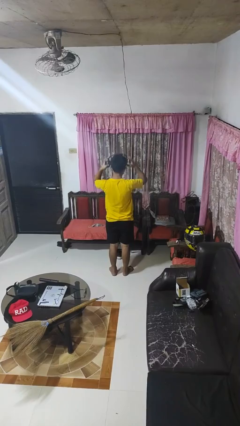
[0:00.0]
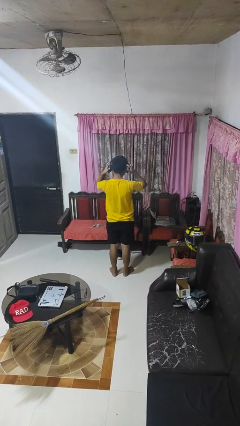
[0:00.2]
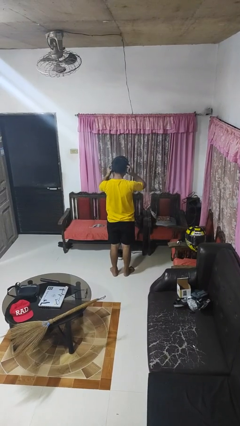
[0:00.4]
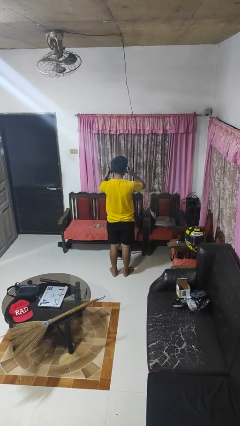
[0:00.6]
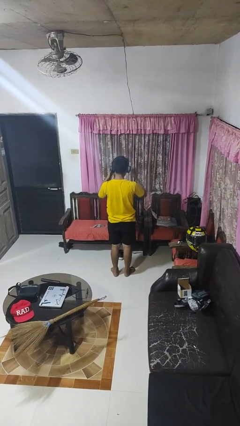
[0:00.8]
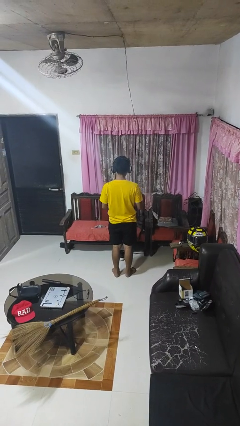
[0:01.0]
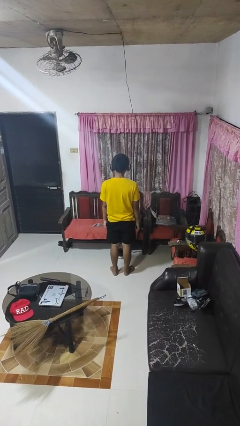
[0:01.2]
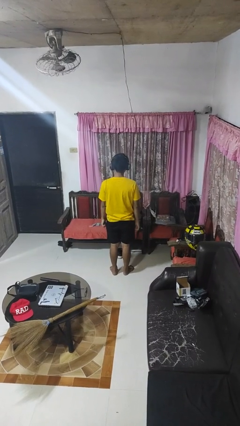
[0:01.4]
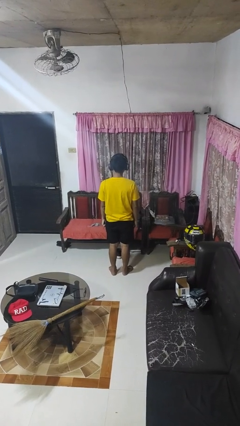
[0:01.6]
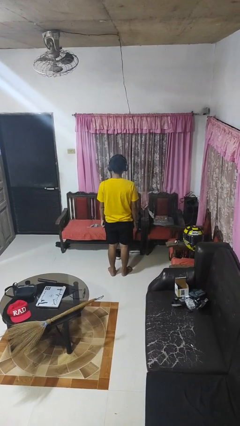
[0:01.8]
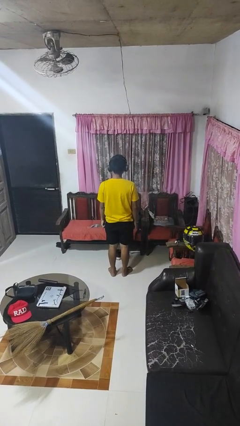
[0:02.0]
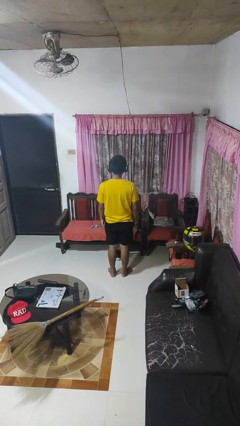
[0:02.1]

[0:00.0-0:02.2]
person puts on headphones

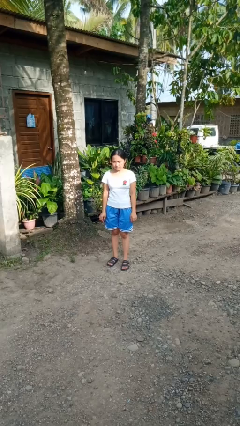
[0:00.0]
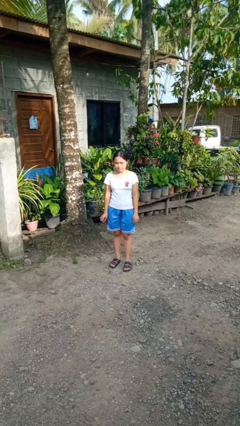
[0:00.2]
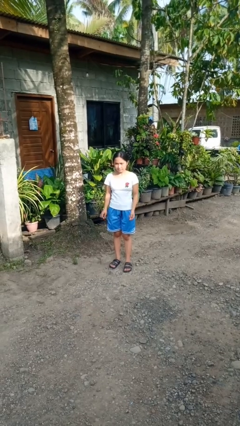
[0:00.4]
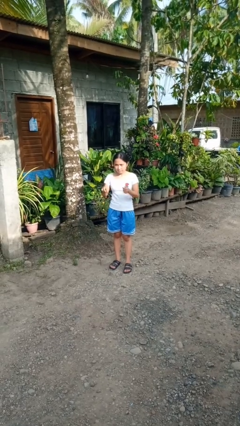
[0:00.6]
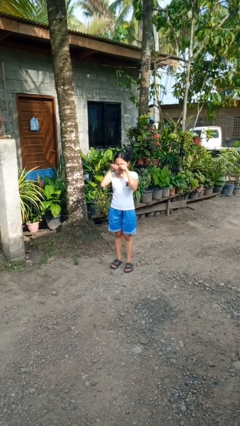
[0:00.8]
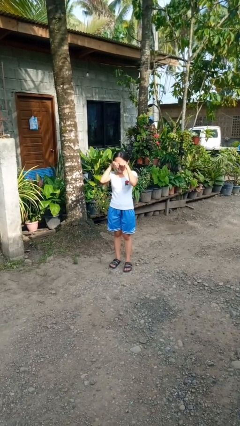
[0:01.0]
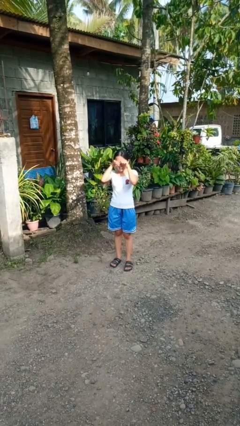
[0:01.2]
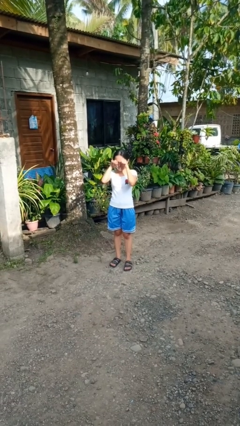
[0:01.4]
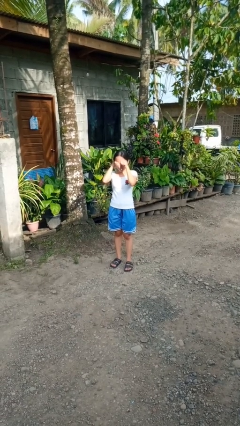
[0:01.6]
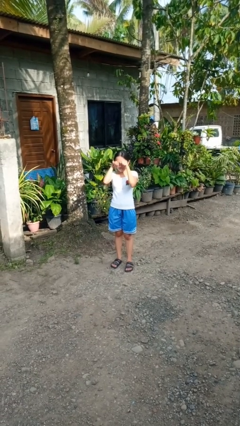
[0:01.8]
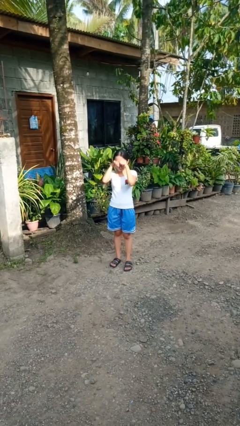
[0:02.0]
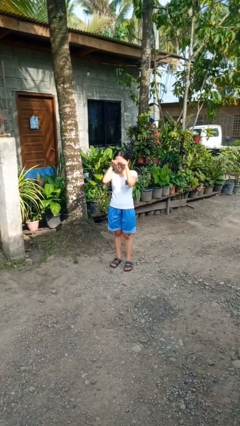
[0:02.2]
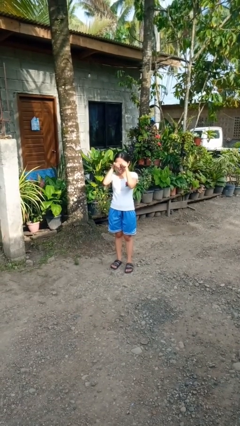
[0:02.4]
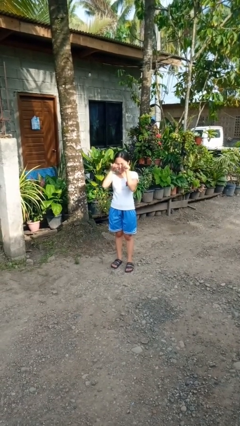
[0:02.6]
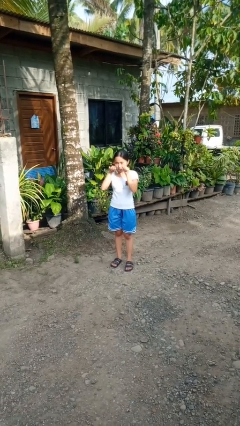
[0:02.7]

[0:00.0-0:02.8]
person rubs eyes

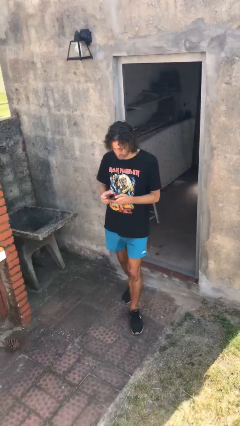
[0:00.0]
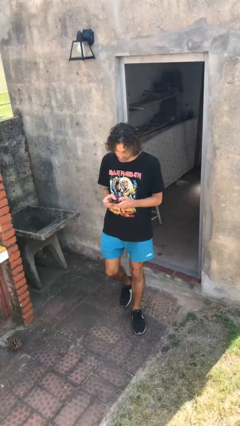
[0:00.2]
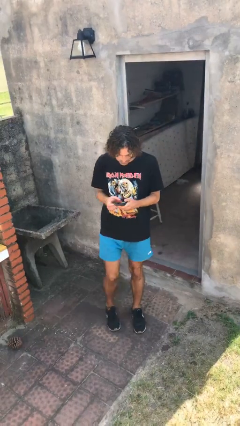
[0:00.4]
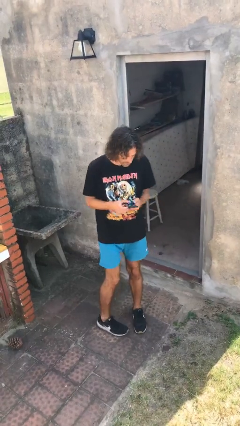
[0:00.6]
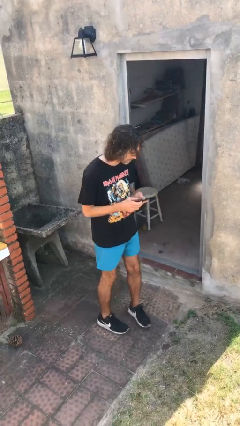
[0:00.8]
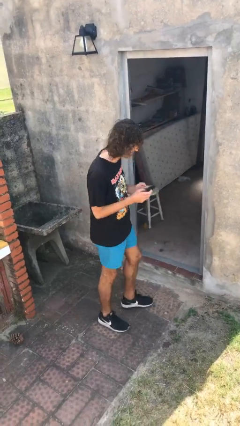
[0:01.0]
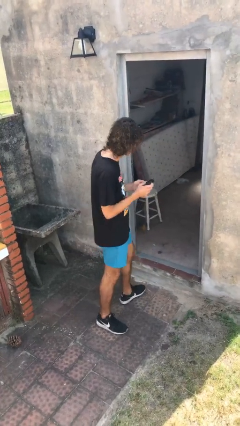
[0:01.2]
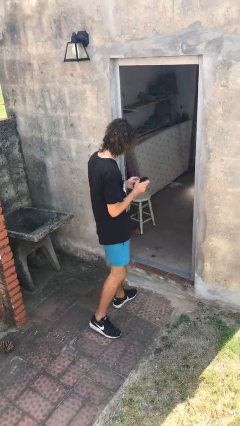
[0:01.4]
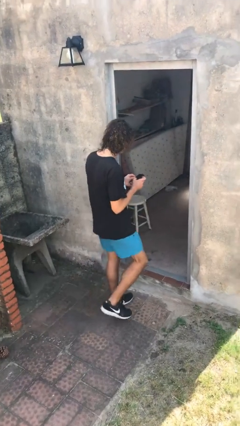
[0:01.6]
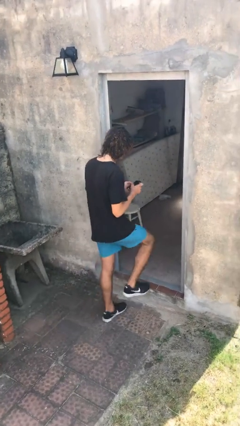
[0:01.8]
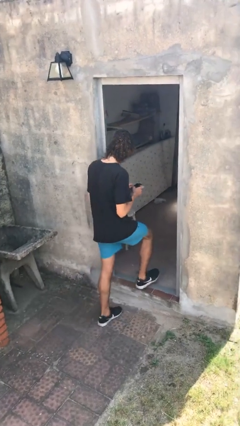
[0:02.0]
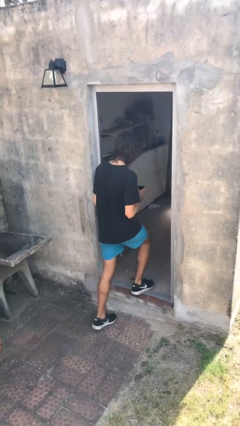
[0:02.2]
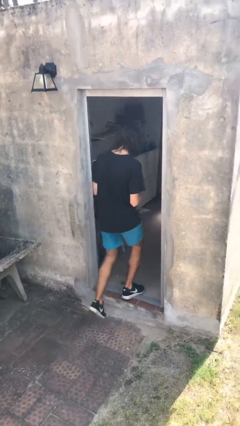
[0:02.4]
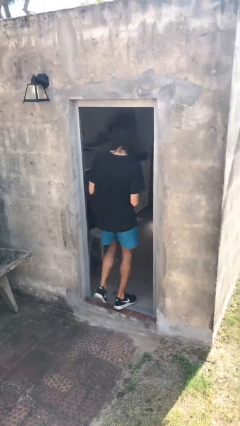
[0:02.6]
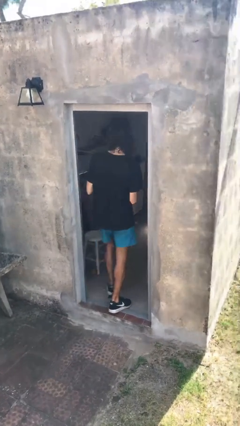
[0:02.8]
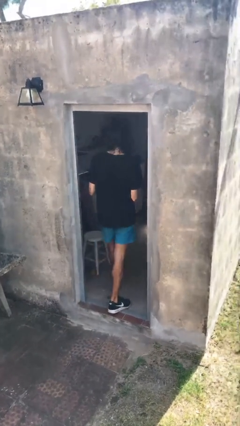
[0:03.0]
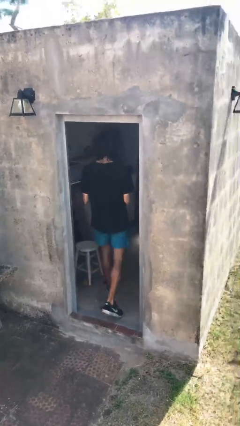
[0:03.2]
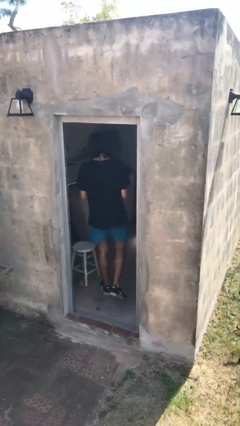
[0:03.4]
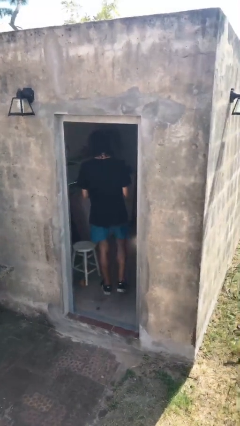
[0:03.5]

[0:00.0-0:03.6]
person exits scene through structure

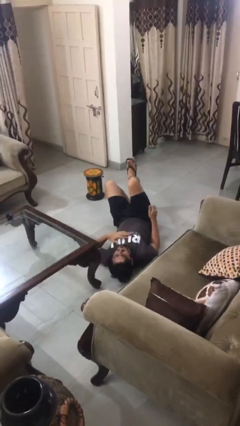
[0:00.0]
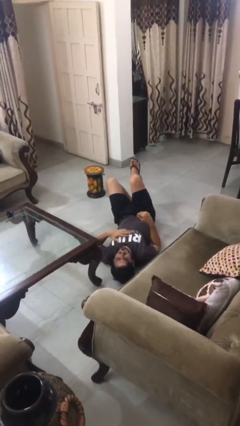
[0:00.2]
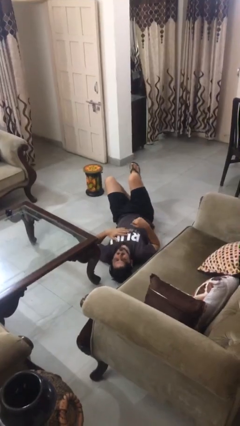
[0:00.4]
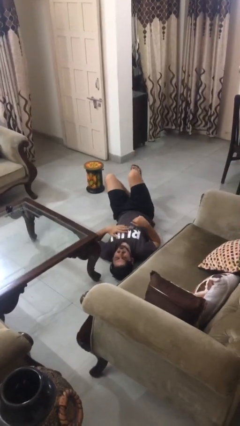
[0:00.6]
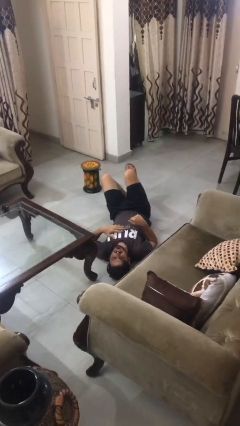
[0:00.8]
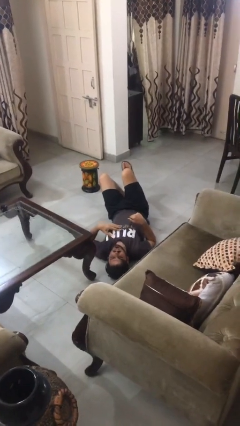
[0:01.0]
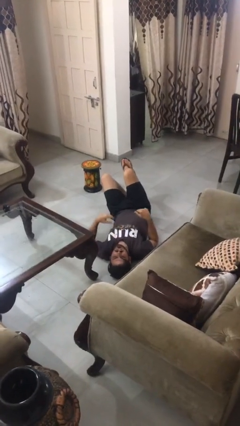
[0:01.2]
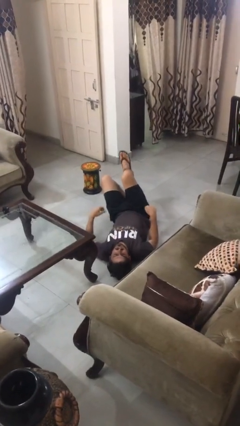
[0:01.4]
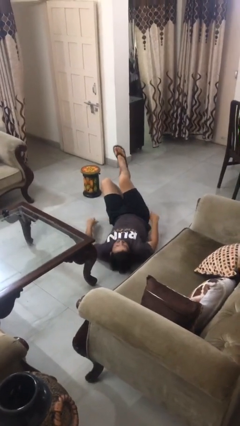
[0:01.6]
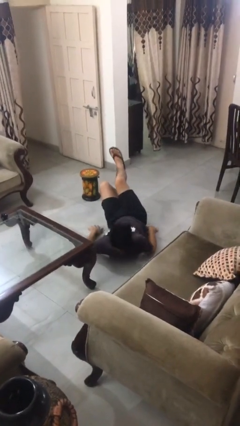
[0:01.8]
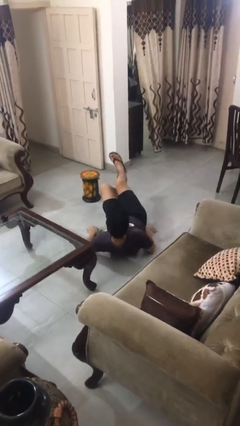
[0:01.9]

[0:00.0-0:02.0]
person lies down on floor

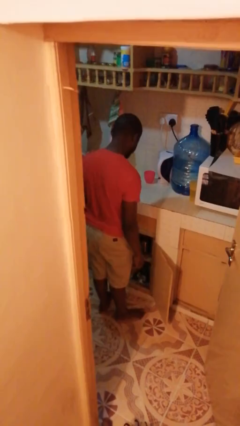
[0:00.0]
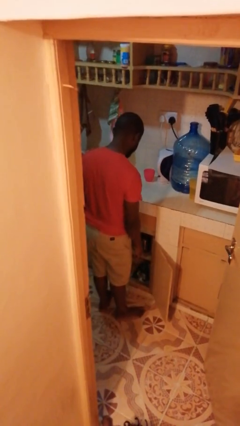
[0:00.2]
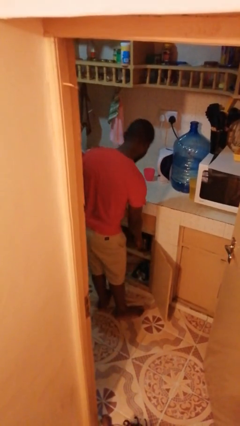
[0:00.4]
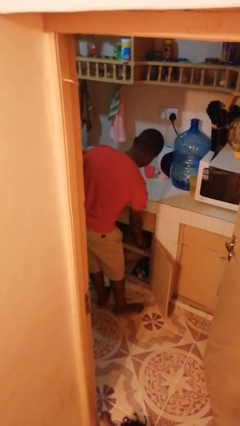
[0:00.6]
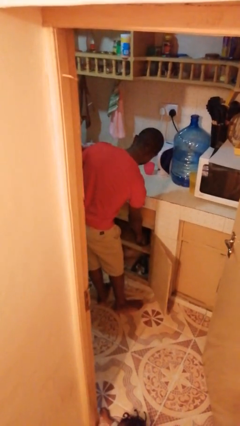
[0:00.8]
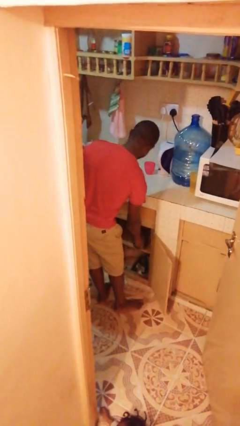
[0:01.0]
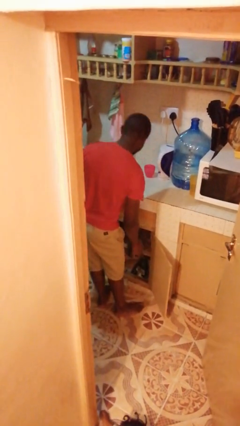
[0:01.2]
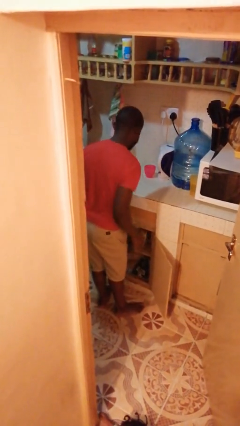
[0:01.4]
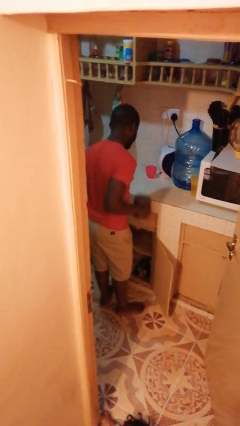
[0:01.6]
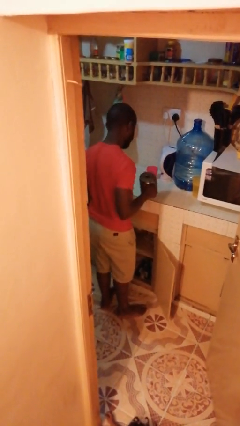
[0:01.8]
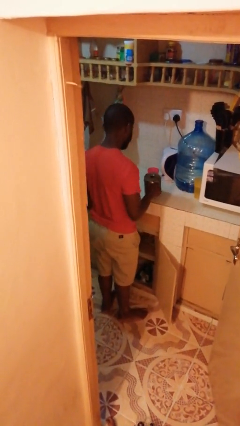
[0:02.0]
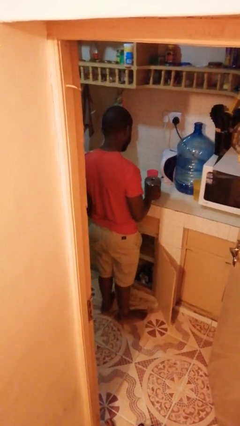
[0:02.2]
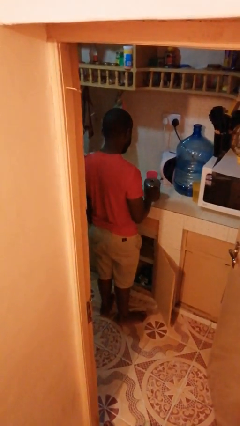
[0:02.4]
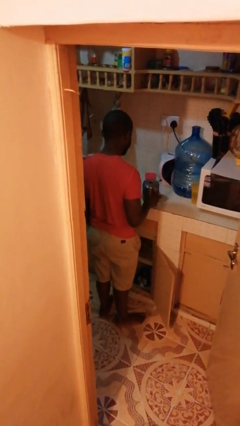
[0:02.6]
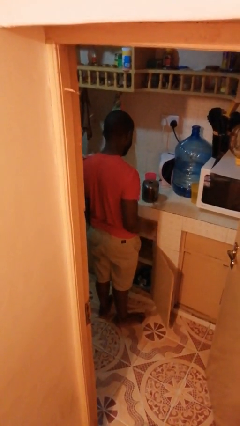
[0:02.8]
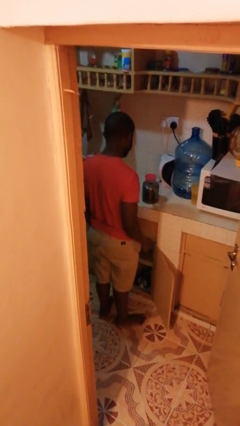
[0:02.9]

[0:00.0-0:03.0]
person takes object from cabinet

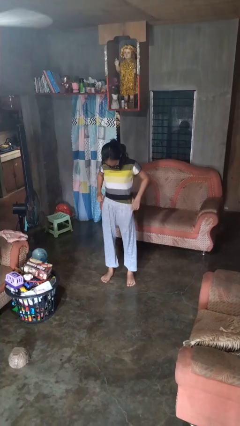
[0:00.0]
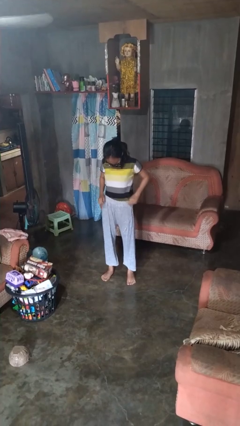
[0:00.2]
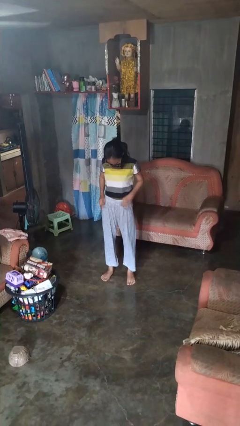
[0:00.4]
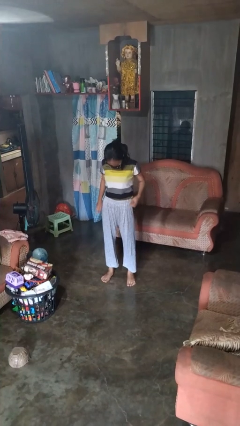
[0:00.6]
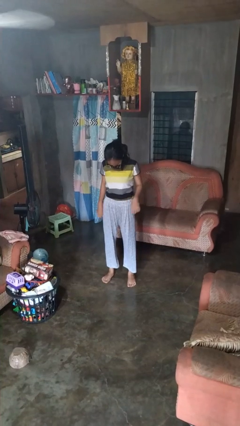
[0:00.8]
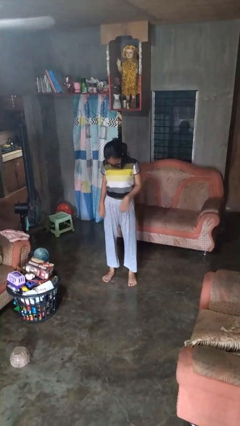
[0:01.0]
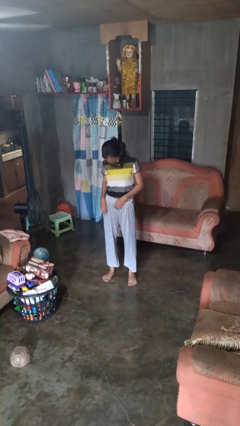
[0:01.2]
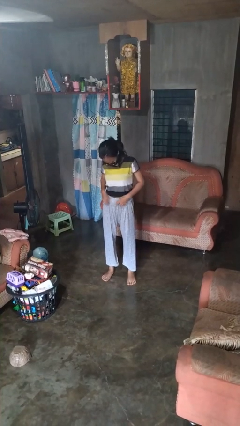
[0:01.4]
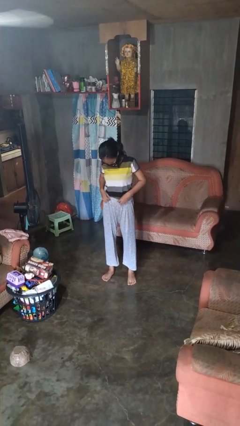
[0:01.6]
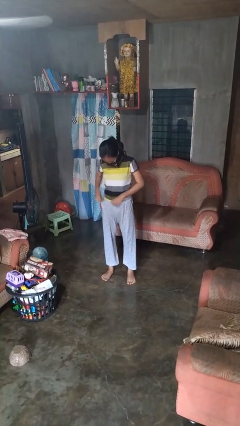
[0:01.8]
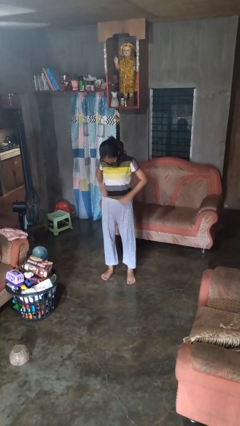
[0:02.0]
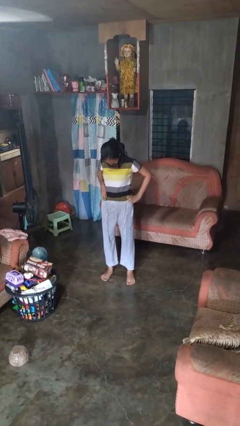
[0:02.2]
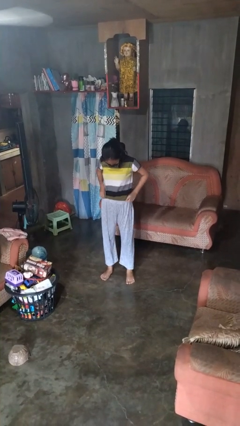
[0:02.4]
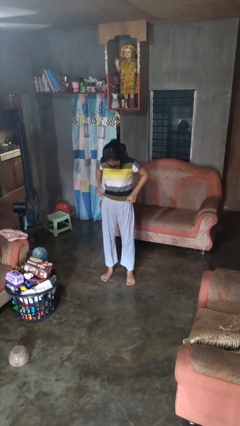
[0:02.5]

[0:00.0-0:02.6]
person untucks shirt

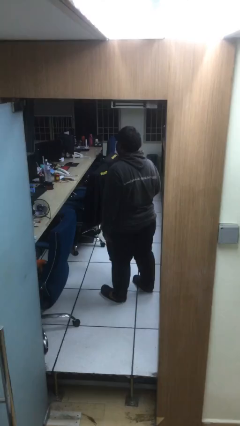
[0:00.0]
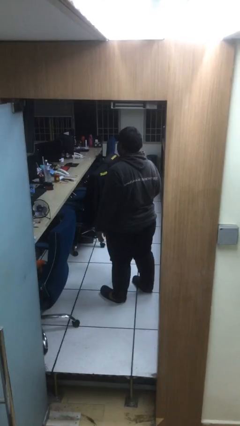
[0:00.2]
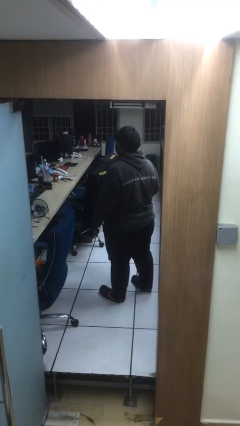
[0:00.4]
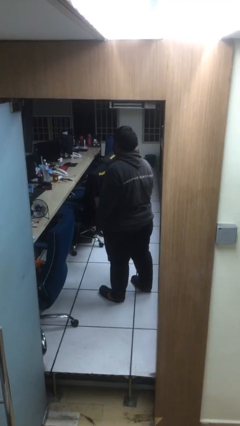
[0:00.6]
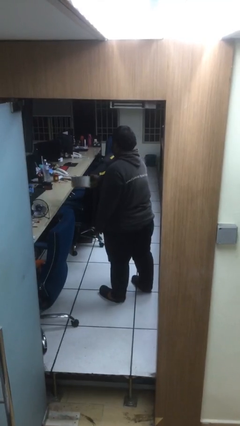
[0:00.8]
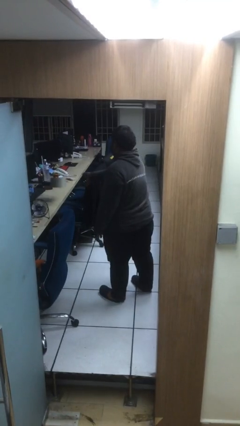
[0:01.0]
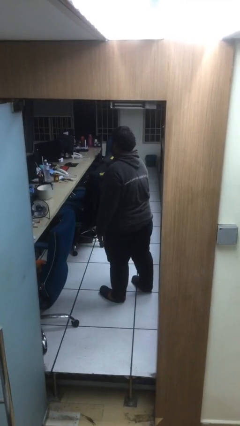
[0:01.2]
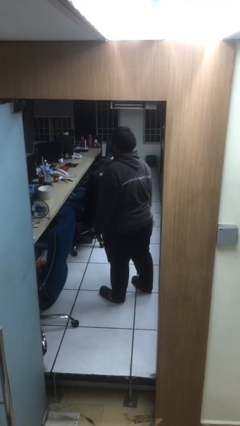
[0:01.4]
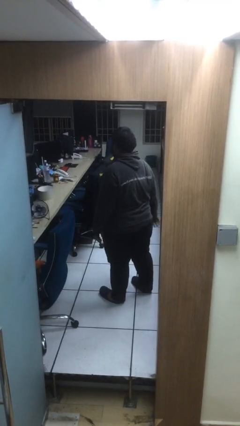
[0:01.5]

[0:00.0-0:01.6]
person throws object on table
